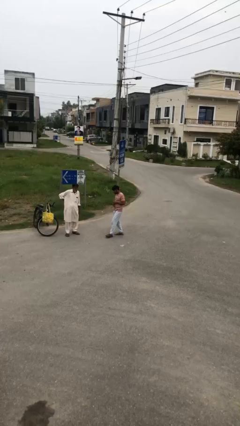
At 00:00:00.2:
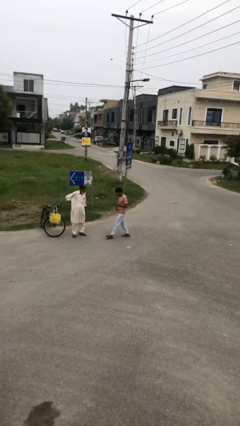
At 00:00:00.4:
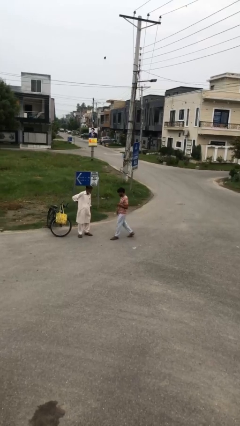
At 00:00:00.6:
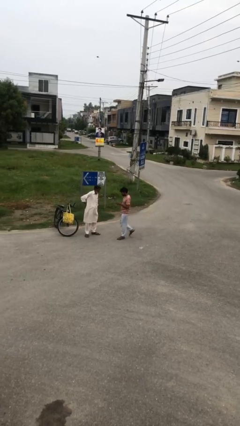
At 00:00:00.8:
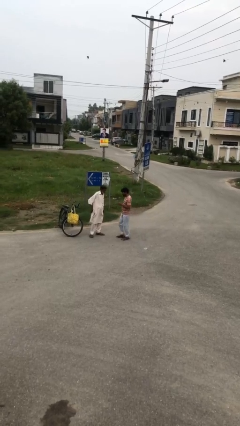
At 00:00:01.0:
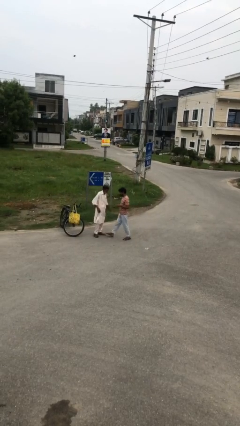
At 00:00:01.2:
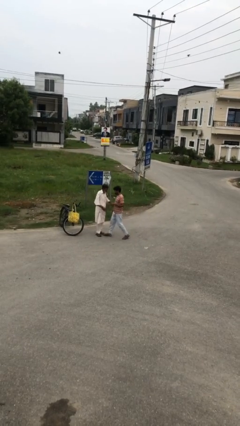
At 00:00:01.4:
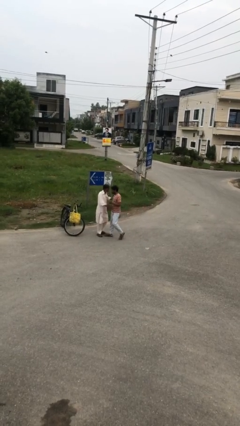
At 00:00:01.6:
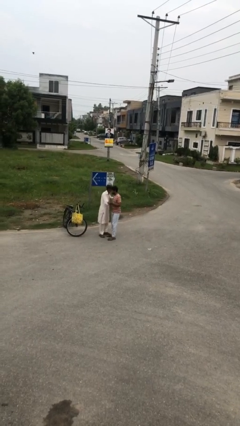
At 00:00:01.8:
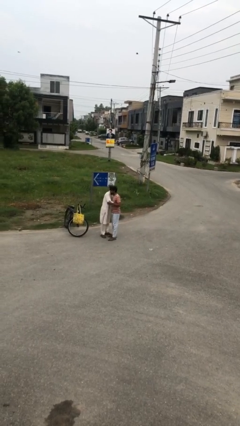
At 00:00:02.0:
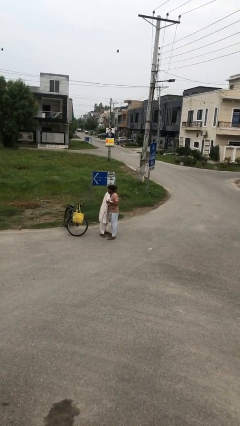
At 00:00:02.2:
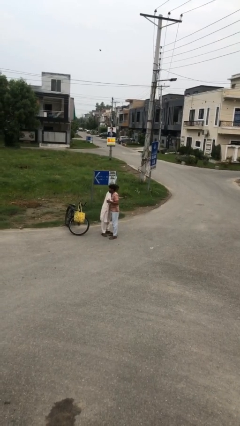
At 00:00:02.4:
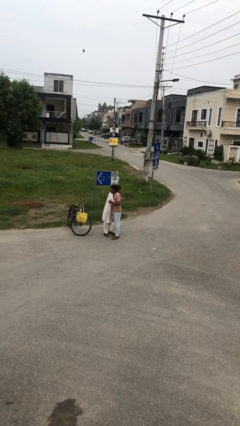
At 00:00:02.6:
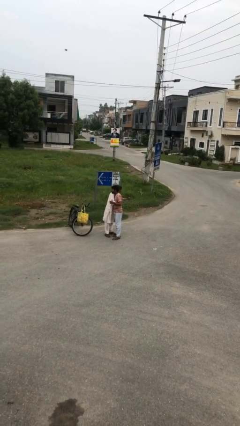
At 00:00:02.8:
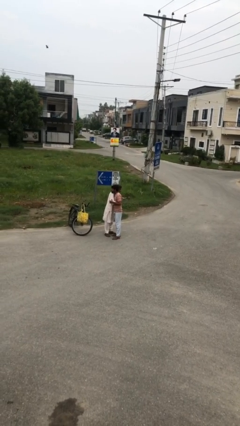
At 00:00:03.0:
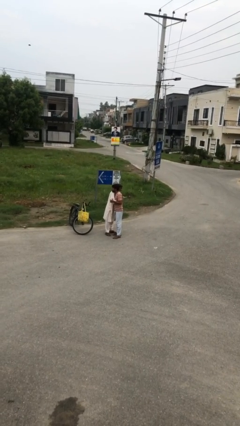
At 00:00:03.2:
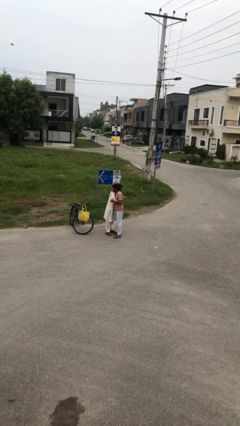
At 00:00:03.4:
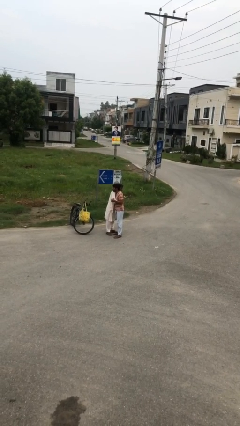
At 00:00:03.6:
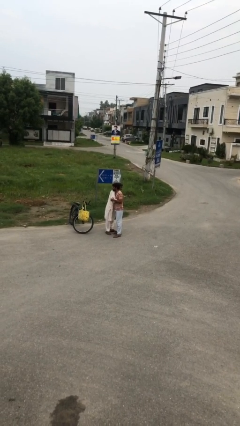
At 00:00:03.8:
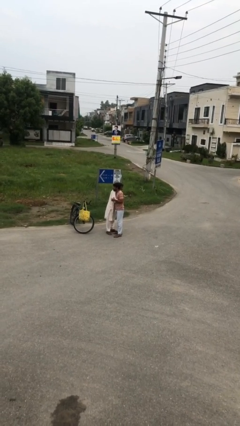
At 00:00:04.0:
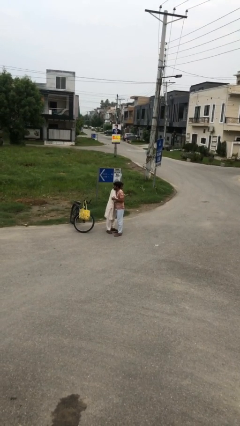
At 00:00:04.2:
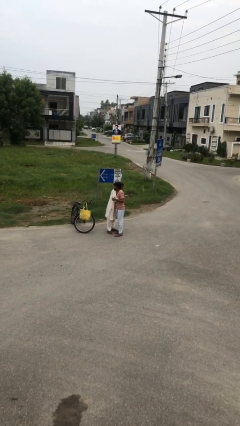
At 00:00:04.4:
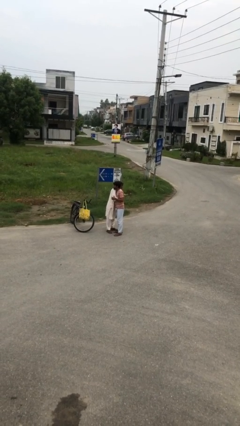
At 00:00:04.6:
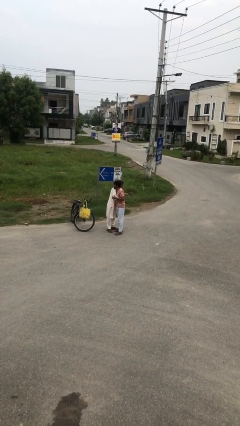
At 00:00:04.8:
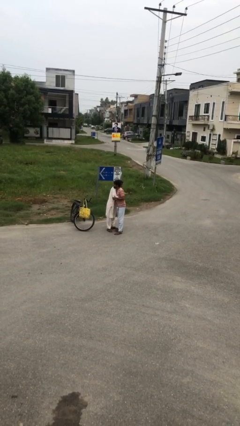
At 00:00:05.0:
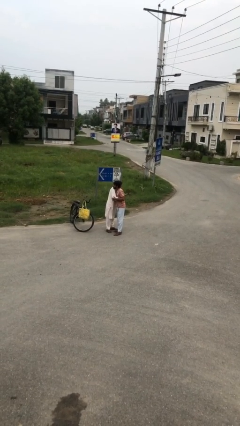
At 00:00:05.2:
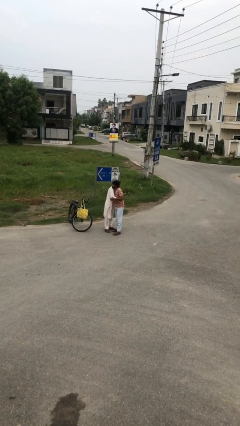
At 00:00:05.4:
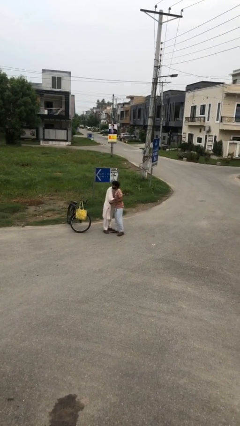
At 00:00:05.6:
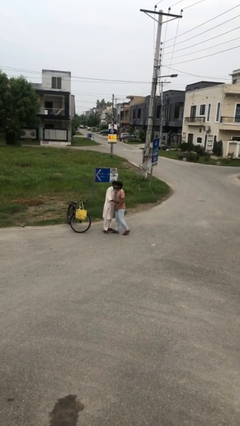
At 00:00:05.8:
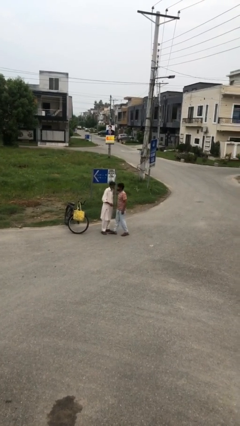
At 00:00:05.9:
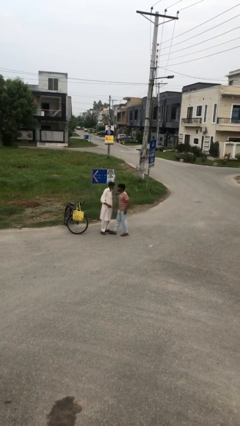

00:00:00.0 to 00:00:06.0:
person embraces person

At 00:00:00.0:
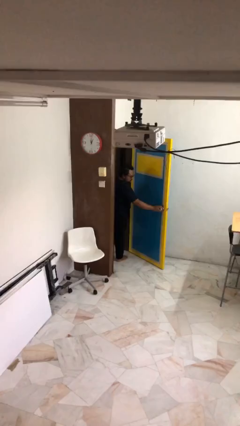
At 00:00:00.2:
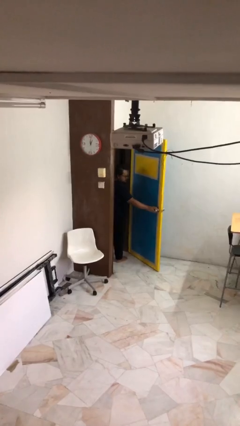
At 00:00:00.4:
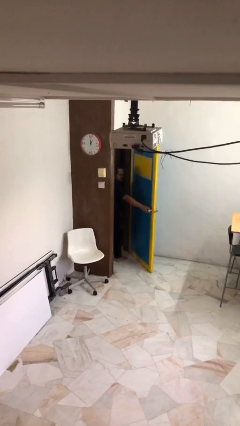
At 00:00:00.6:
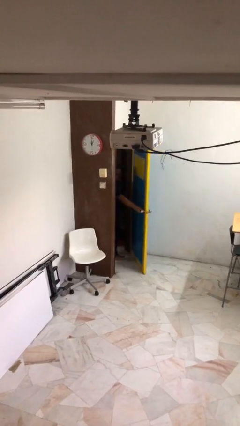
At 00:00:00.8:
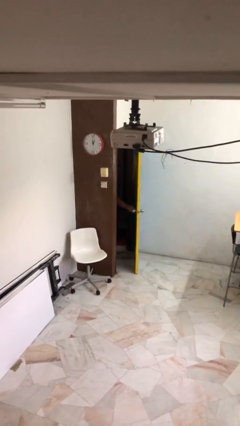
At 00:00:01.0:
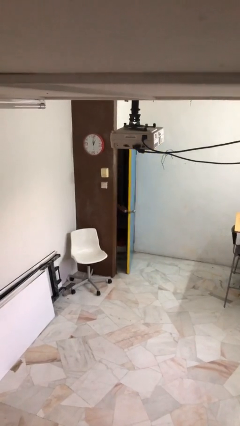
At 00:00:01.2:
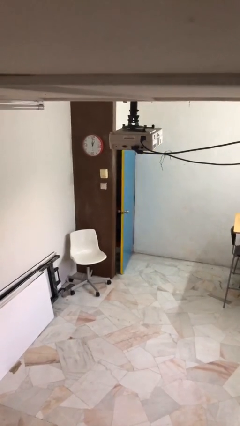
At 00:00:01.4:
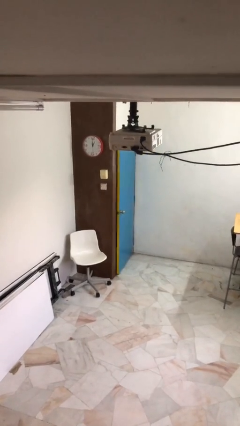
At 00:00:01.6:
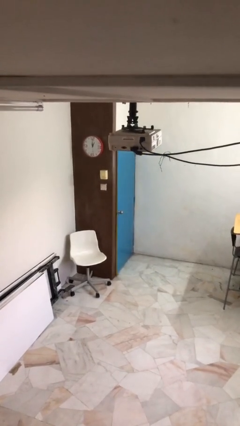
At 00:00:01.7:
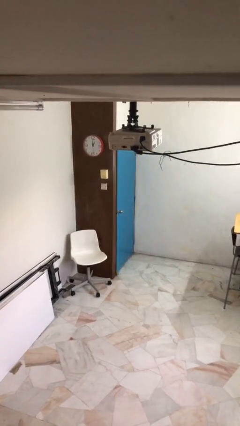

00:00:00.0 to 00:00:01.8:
person closes facility door

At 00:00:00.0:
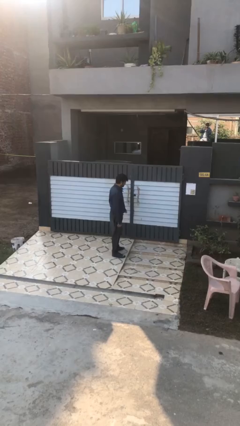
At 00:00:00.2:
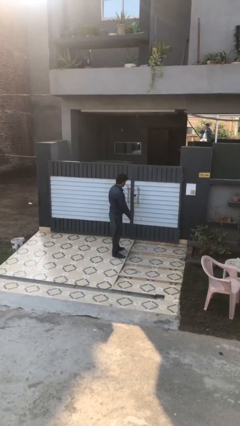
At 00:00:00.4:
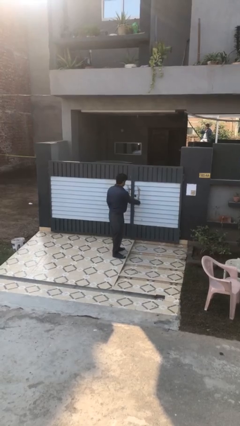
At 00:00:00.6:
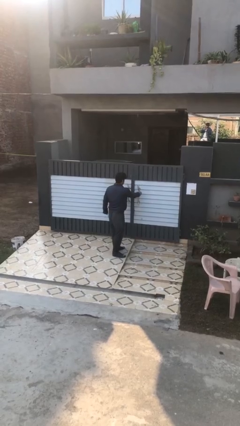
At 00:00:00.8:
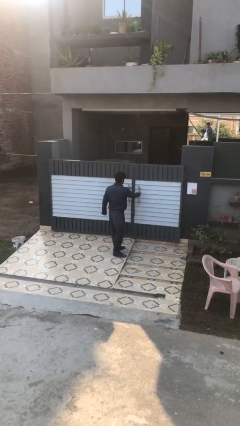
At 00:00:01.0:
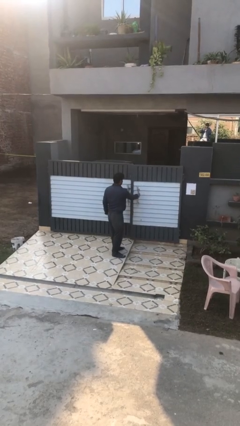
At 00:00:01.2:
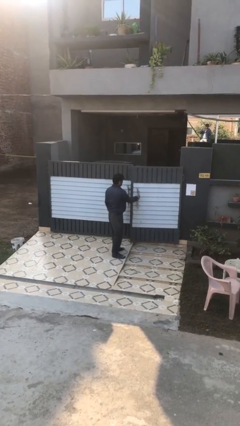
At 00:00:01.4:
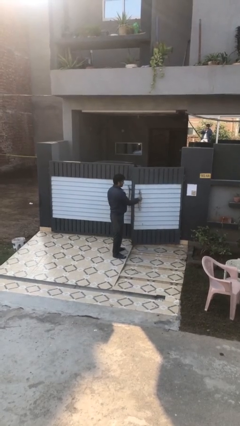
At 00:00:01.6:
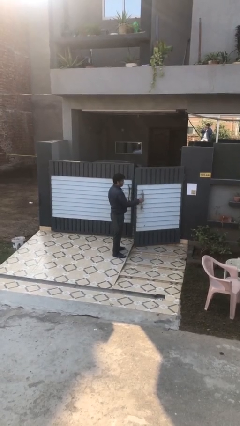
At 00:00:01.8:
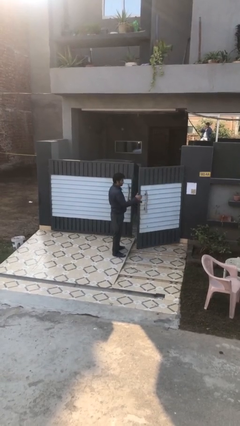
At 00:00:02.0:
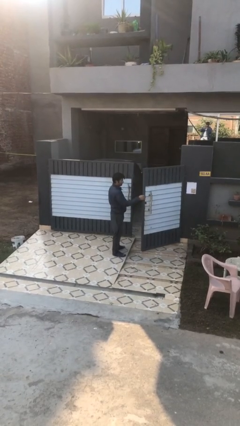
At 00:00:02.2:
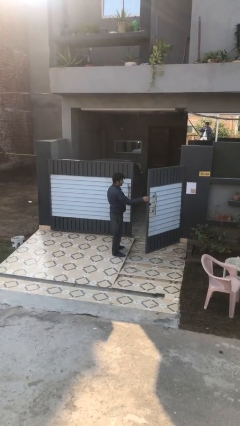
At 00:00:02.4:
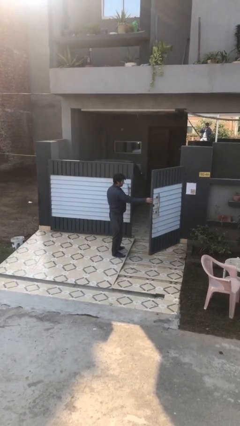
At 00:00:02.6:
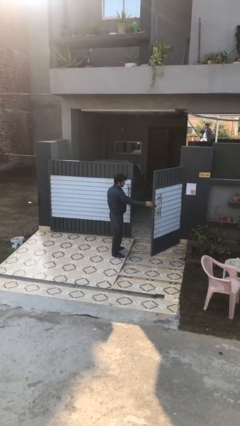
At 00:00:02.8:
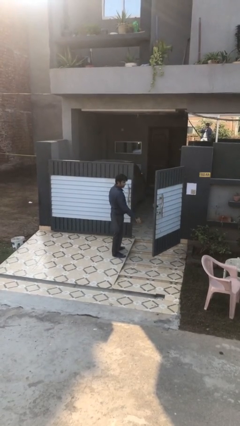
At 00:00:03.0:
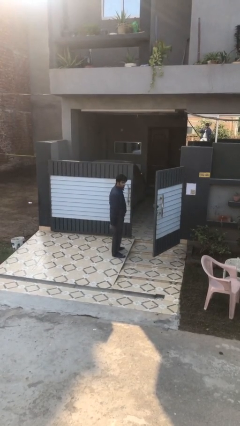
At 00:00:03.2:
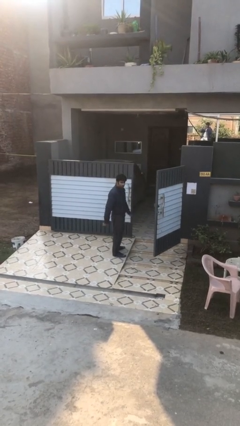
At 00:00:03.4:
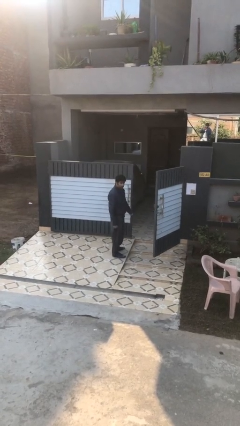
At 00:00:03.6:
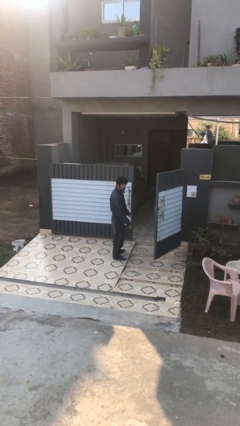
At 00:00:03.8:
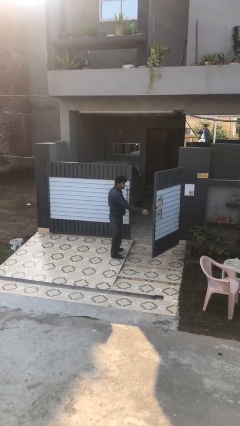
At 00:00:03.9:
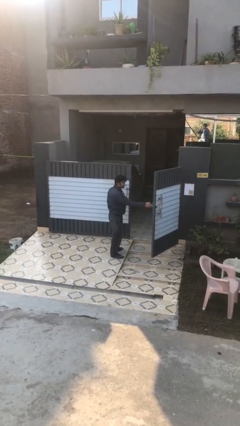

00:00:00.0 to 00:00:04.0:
person opens facility door

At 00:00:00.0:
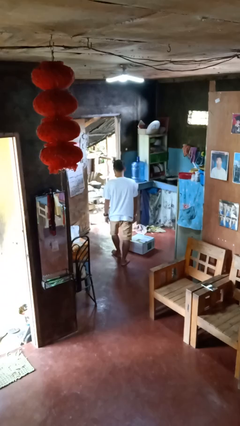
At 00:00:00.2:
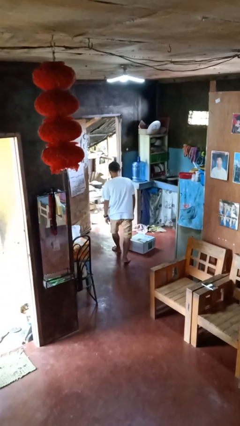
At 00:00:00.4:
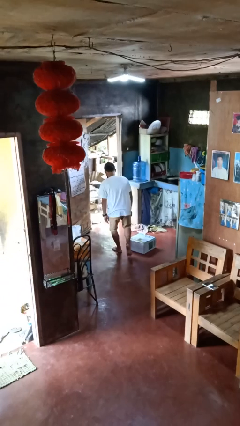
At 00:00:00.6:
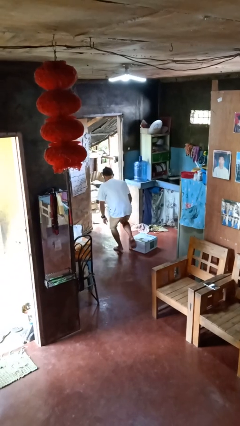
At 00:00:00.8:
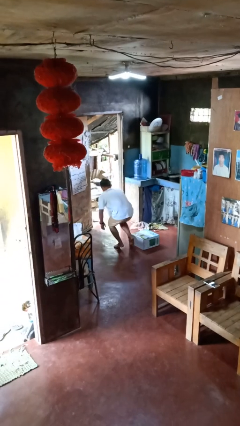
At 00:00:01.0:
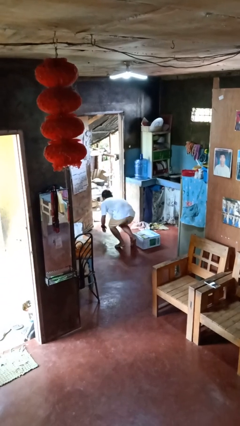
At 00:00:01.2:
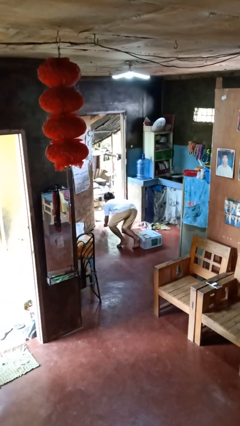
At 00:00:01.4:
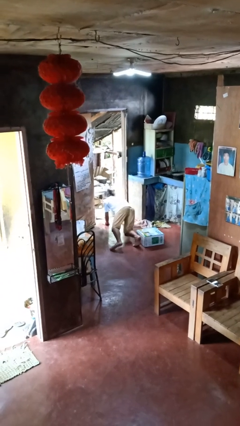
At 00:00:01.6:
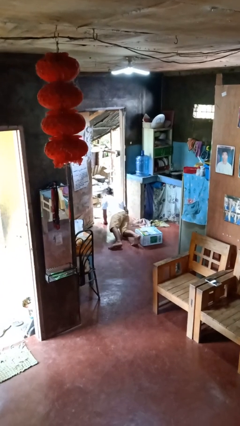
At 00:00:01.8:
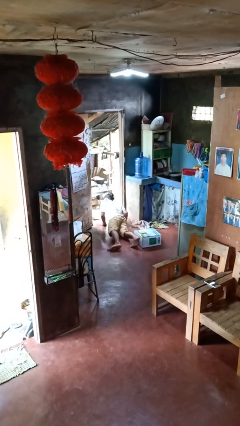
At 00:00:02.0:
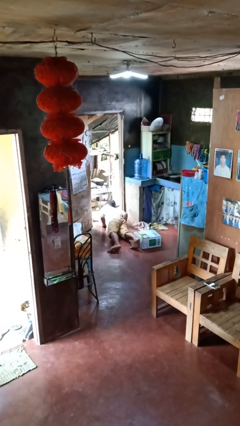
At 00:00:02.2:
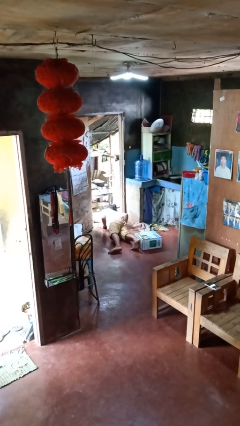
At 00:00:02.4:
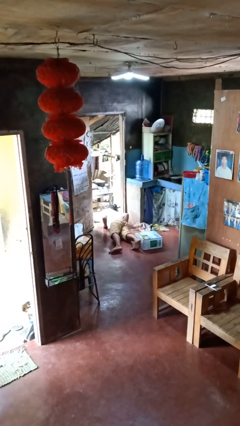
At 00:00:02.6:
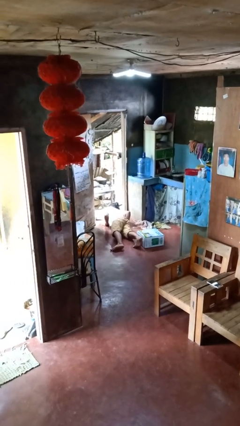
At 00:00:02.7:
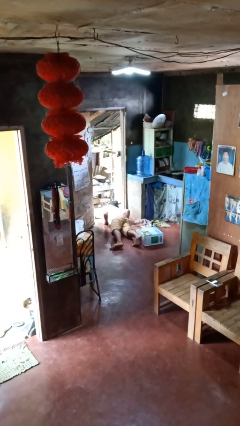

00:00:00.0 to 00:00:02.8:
person trips on object on floor

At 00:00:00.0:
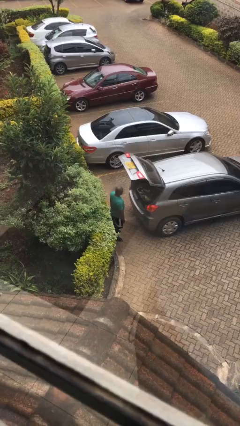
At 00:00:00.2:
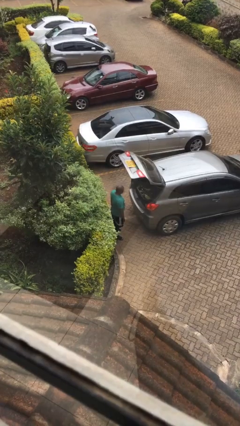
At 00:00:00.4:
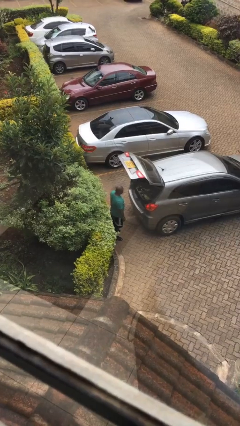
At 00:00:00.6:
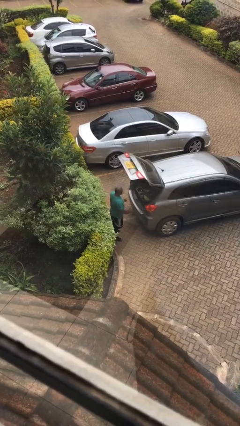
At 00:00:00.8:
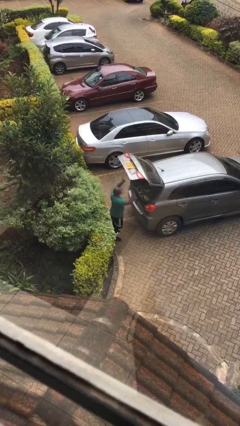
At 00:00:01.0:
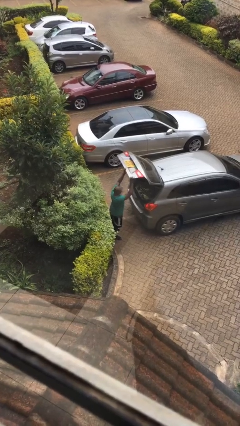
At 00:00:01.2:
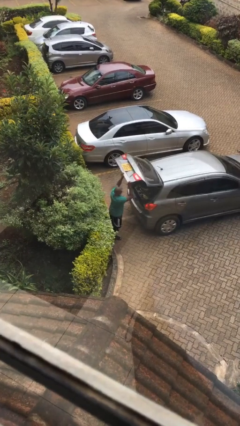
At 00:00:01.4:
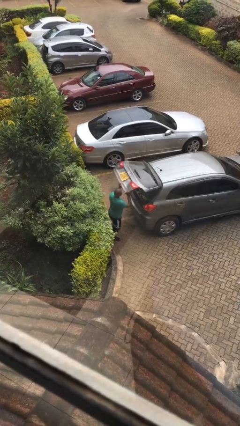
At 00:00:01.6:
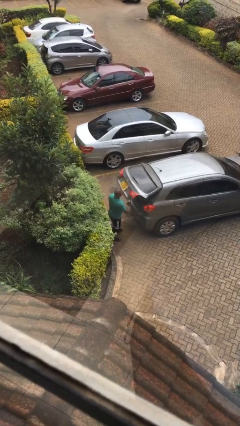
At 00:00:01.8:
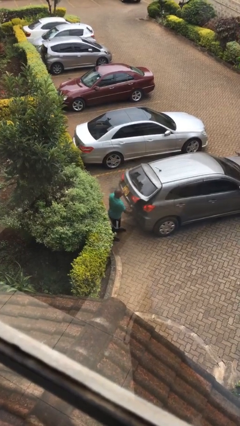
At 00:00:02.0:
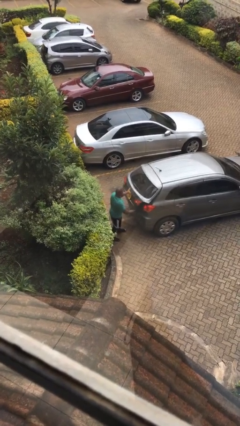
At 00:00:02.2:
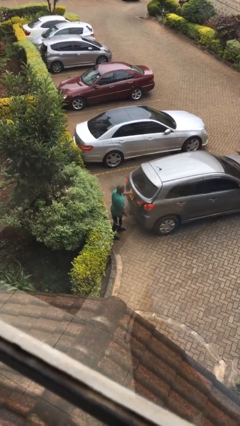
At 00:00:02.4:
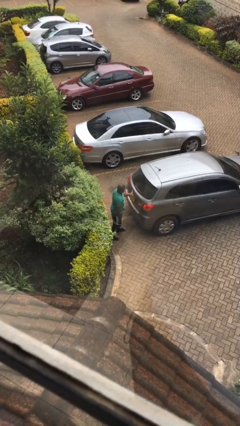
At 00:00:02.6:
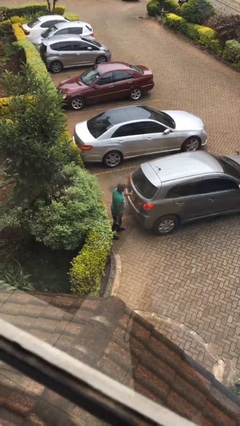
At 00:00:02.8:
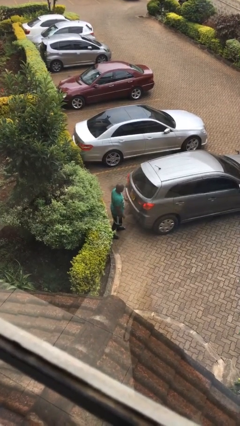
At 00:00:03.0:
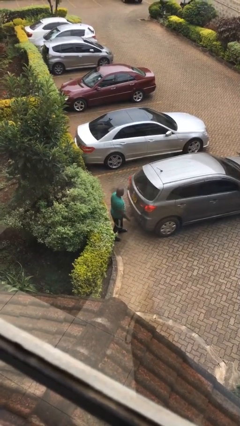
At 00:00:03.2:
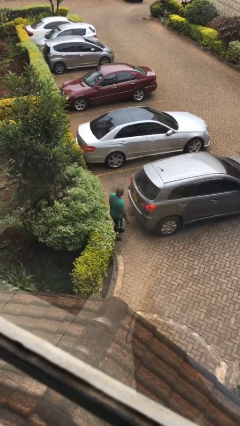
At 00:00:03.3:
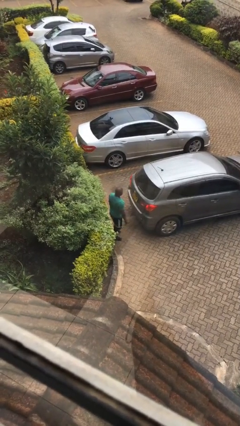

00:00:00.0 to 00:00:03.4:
person closes car trunk
